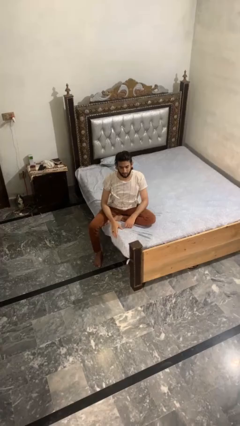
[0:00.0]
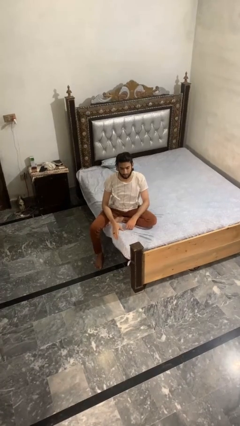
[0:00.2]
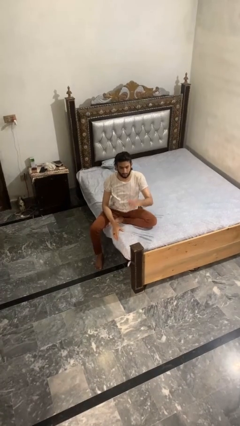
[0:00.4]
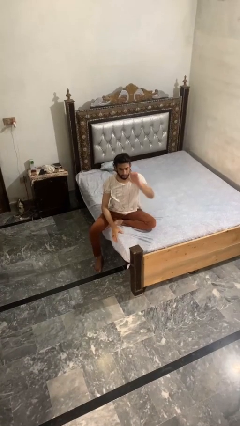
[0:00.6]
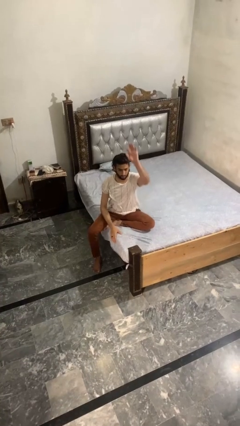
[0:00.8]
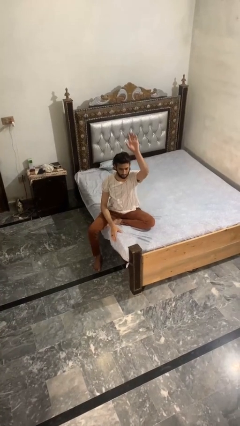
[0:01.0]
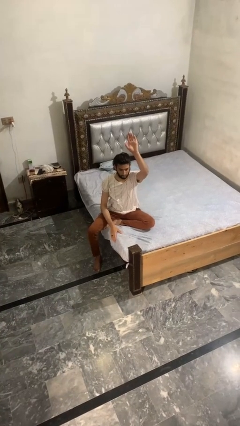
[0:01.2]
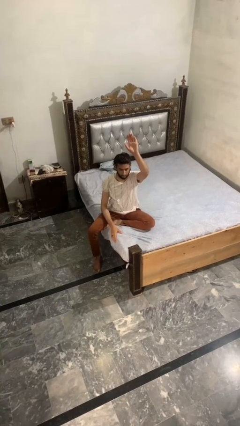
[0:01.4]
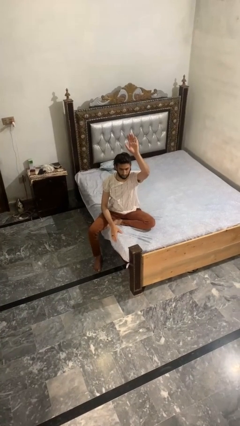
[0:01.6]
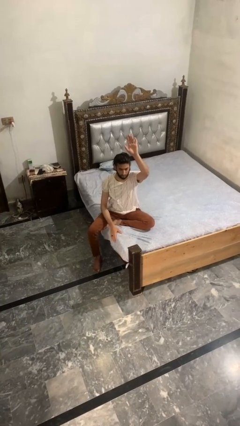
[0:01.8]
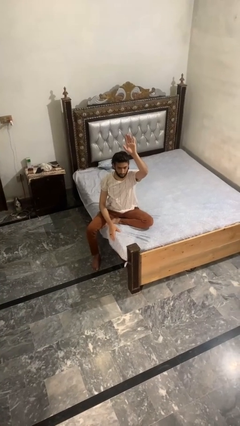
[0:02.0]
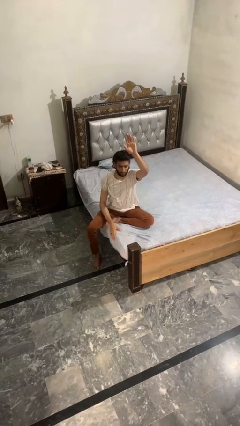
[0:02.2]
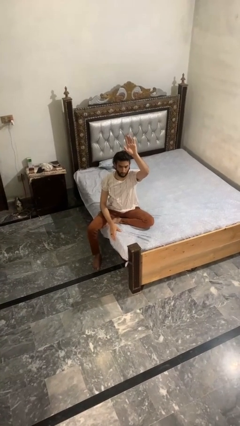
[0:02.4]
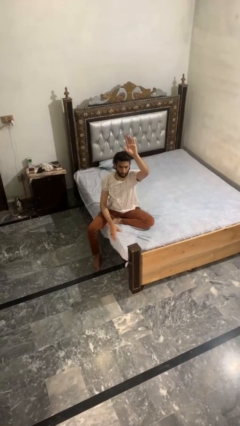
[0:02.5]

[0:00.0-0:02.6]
person gestures raise hand

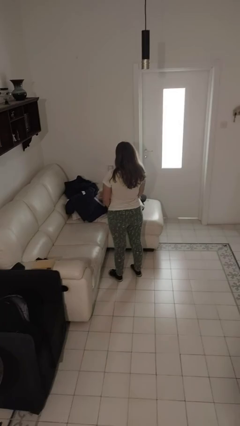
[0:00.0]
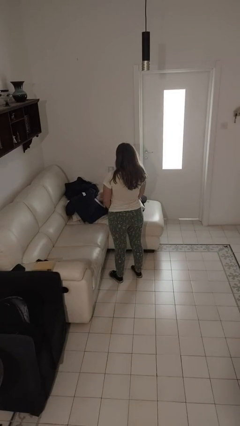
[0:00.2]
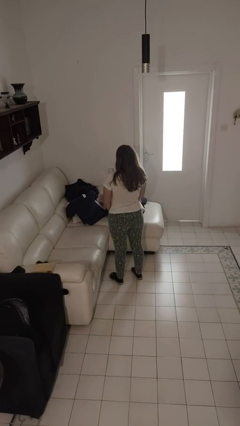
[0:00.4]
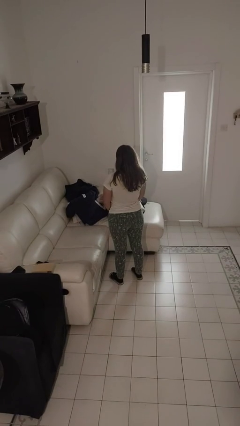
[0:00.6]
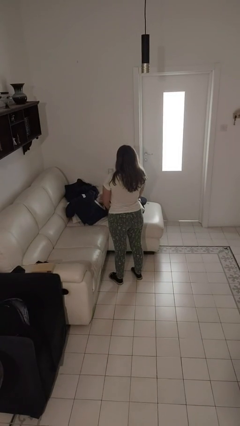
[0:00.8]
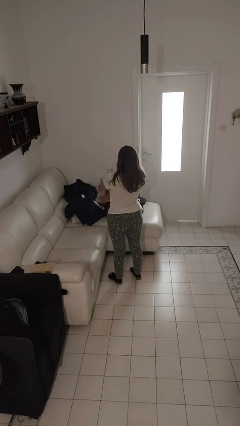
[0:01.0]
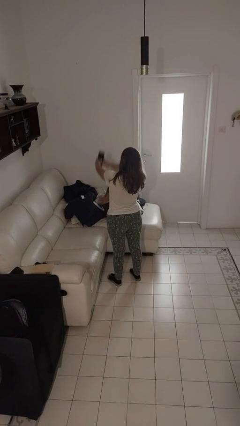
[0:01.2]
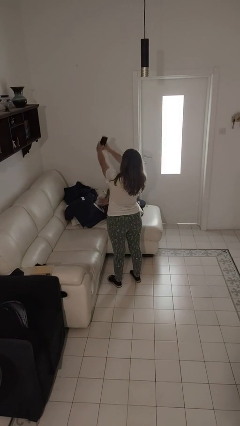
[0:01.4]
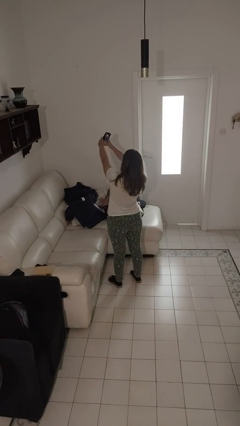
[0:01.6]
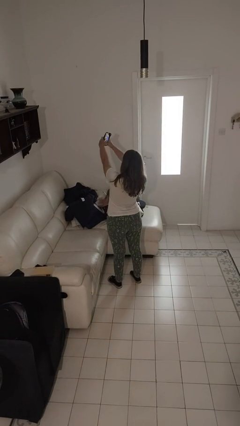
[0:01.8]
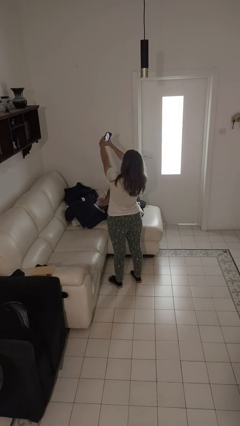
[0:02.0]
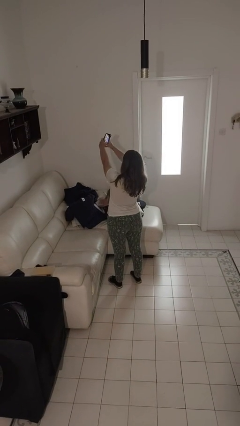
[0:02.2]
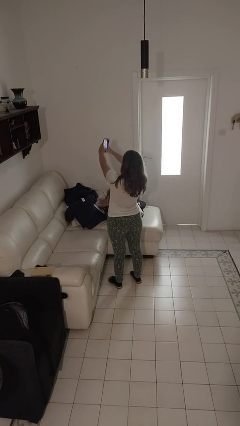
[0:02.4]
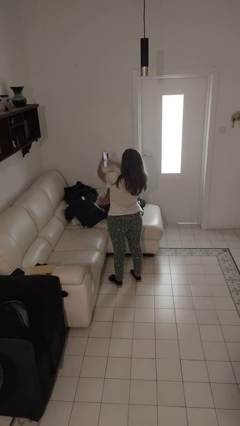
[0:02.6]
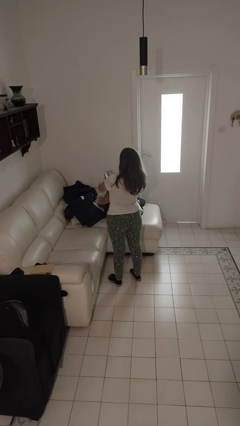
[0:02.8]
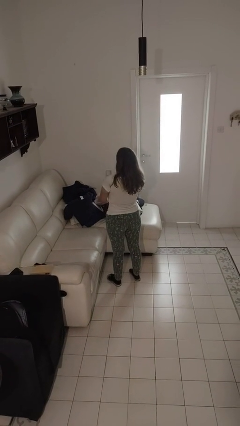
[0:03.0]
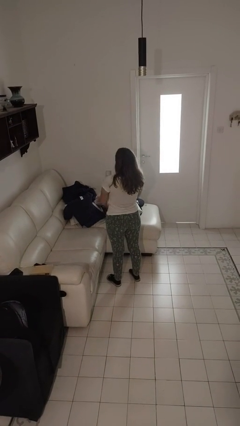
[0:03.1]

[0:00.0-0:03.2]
person takes selfie

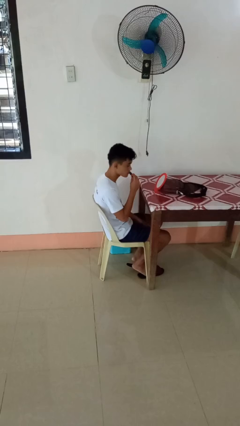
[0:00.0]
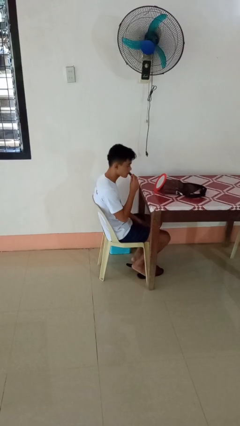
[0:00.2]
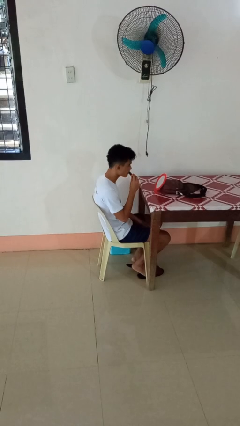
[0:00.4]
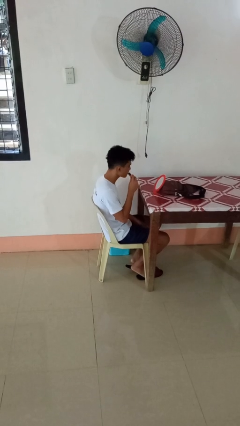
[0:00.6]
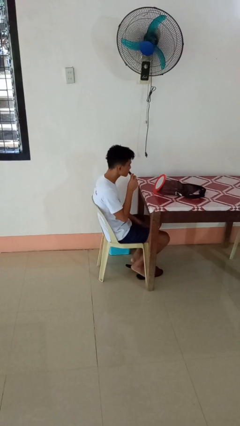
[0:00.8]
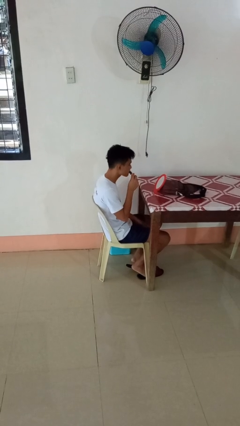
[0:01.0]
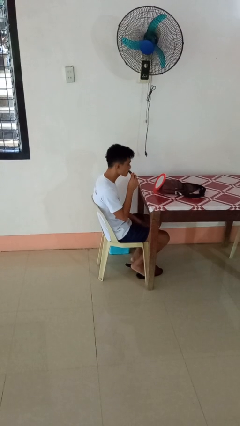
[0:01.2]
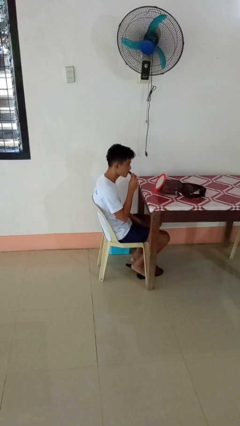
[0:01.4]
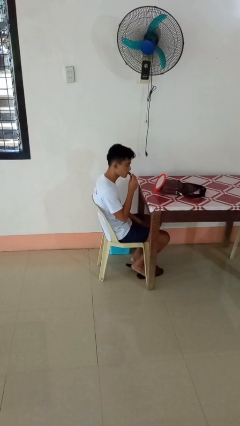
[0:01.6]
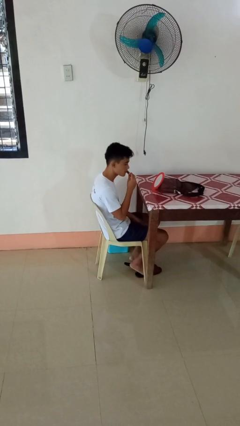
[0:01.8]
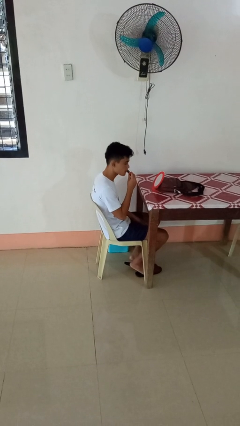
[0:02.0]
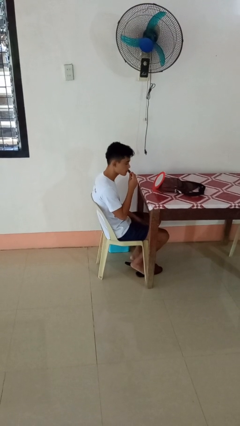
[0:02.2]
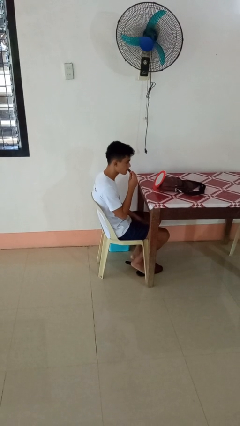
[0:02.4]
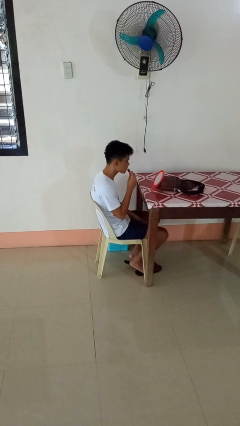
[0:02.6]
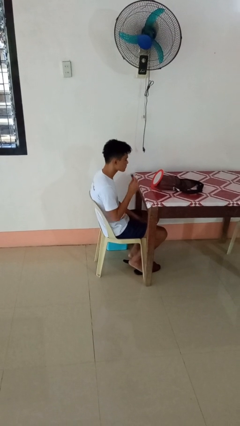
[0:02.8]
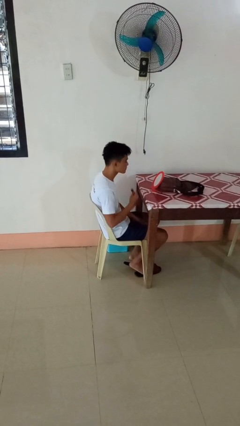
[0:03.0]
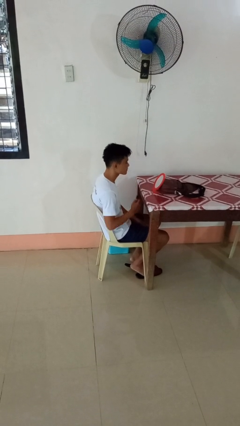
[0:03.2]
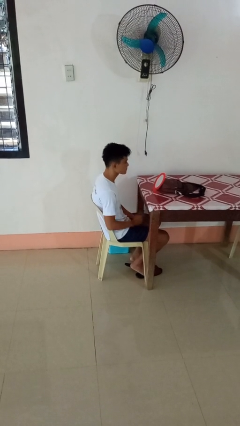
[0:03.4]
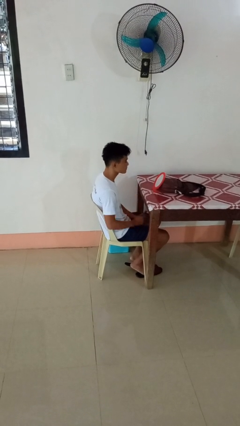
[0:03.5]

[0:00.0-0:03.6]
person applies lip makeup

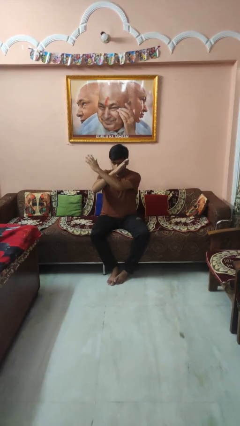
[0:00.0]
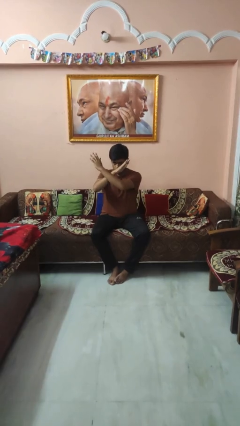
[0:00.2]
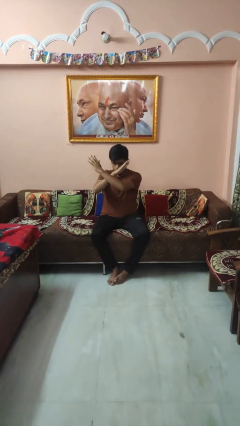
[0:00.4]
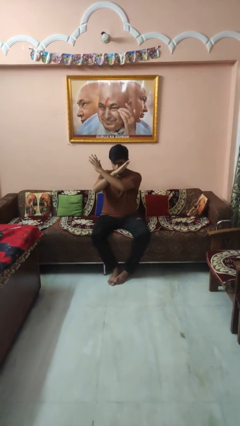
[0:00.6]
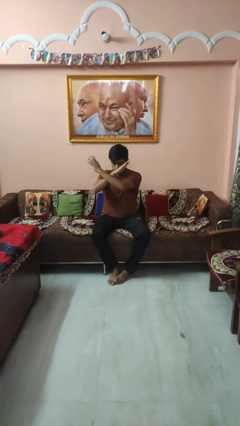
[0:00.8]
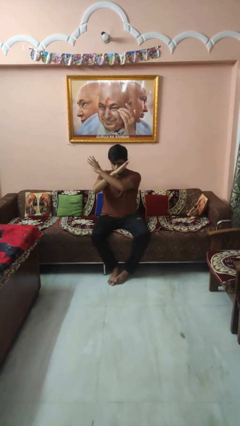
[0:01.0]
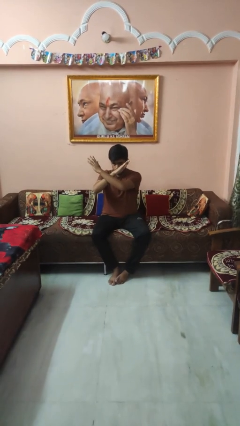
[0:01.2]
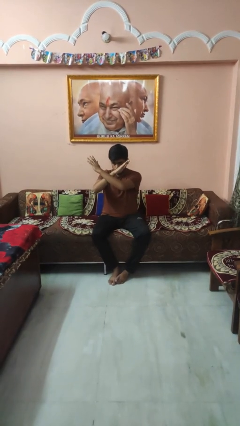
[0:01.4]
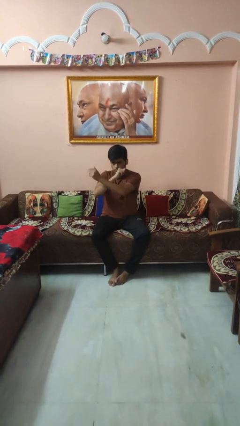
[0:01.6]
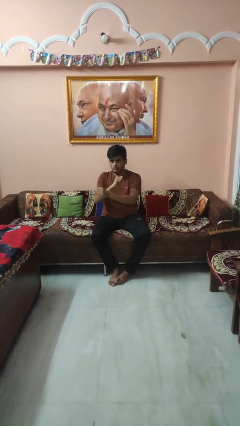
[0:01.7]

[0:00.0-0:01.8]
person gestures arms x

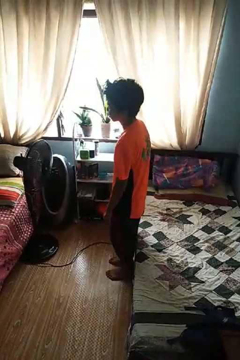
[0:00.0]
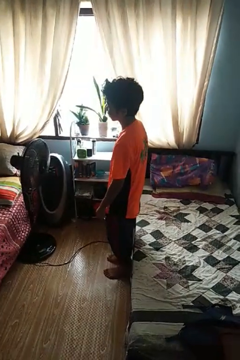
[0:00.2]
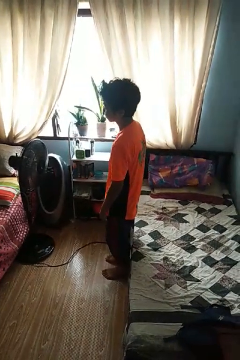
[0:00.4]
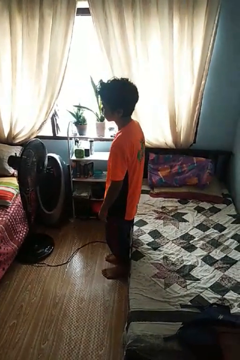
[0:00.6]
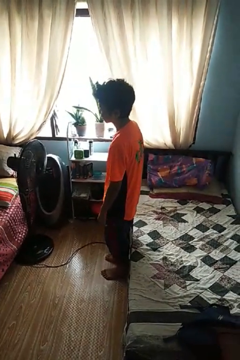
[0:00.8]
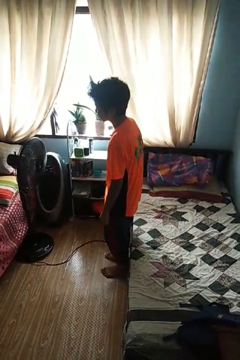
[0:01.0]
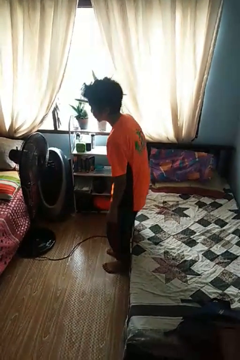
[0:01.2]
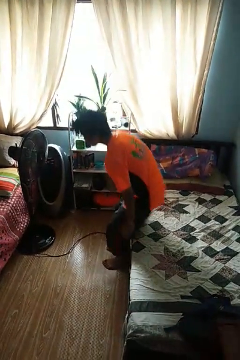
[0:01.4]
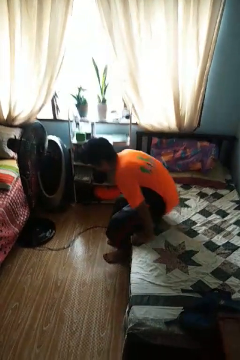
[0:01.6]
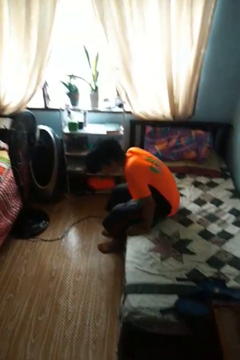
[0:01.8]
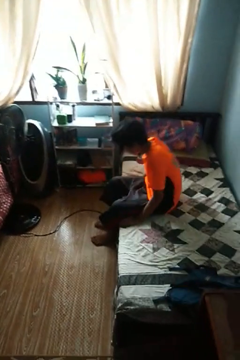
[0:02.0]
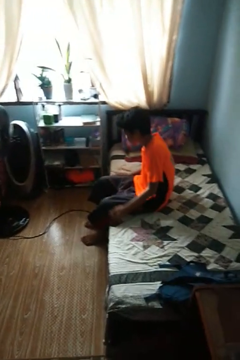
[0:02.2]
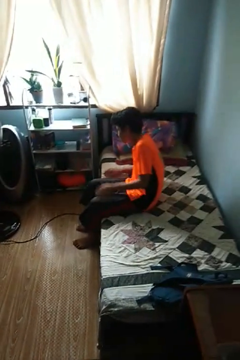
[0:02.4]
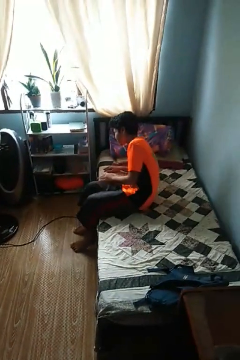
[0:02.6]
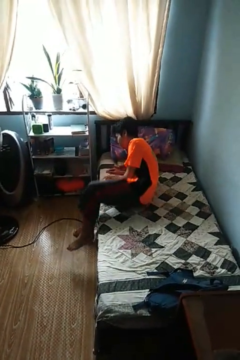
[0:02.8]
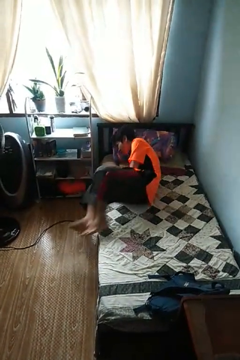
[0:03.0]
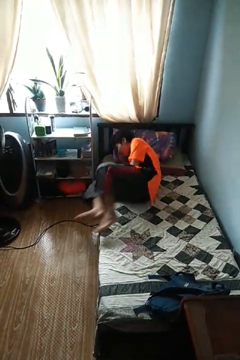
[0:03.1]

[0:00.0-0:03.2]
person lies down on bed

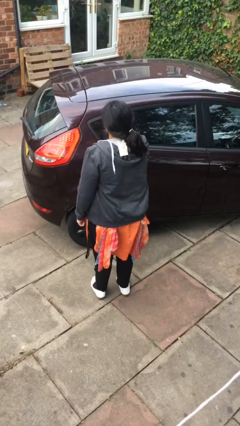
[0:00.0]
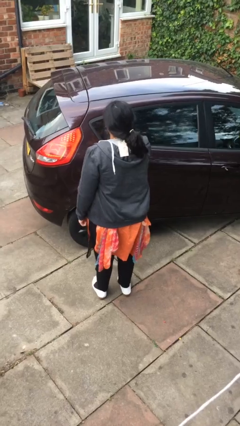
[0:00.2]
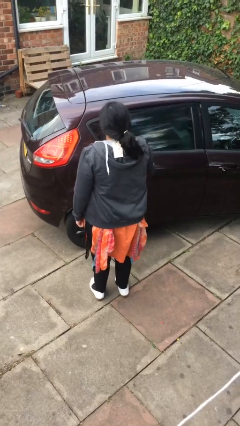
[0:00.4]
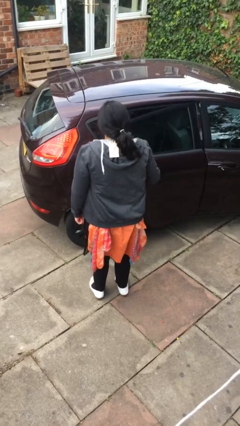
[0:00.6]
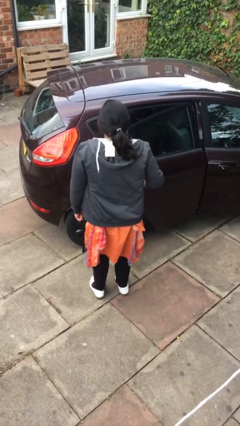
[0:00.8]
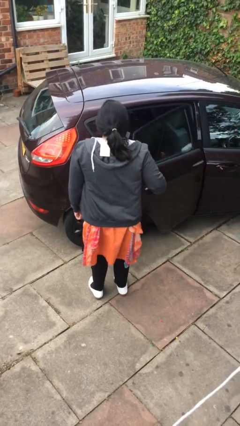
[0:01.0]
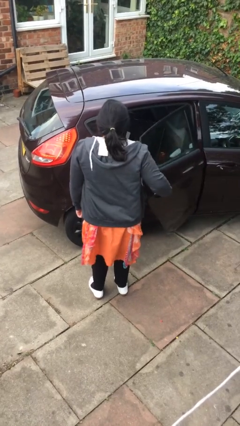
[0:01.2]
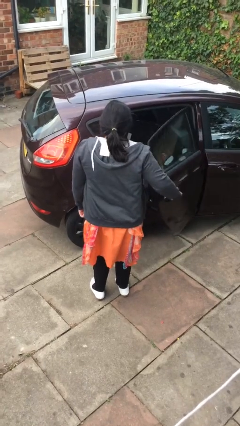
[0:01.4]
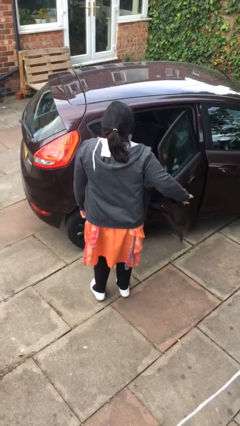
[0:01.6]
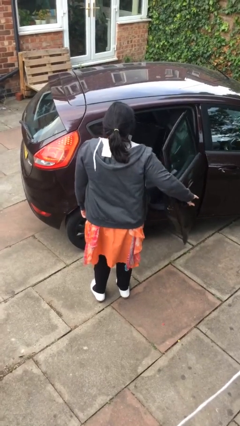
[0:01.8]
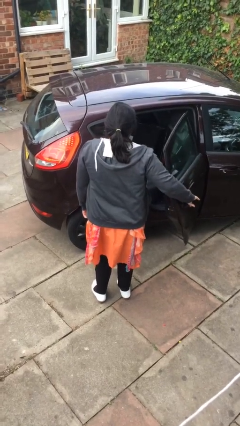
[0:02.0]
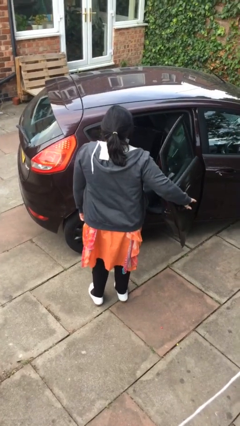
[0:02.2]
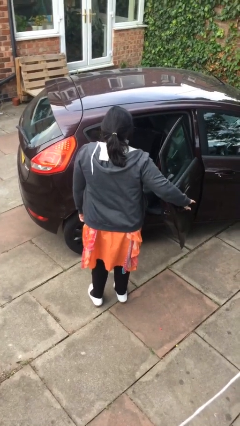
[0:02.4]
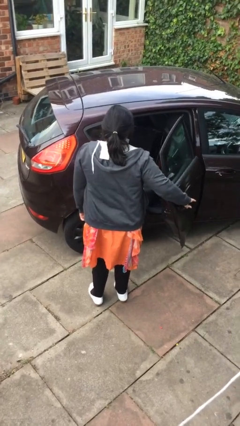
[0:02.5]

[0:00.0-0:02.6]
person opens car door

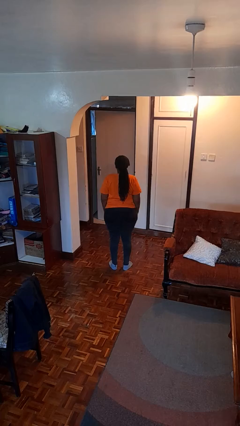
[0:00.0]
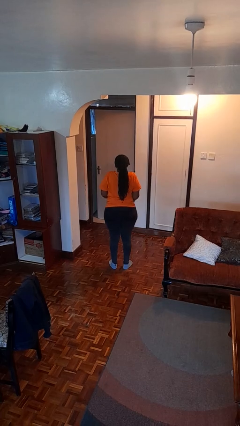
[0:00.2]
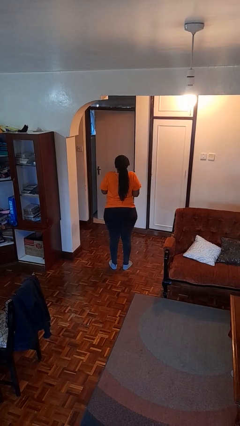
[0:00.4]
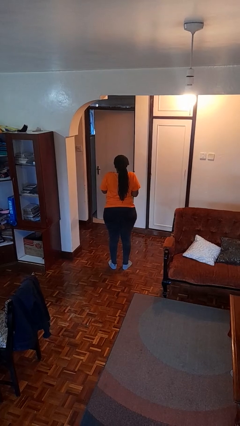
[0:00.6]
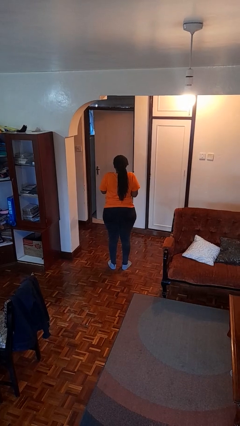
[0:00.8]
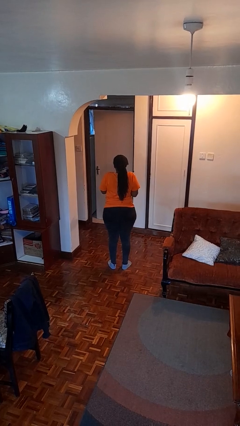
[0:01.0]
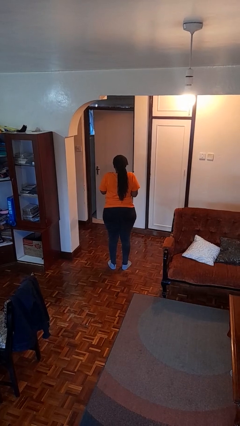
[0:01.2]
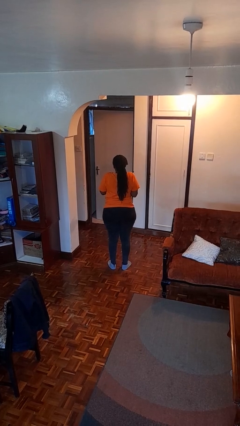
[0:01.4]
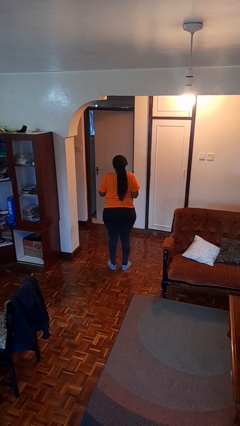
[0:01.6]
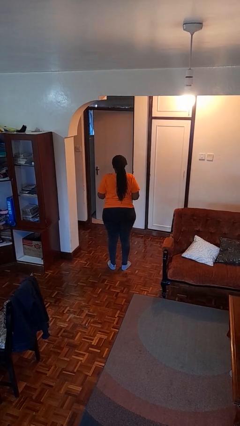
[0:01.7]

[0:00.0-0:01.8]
person shrugs
